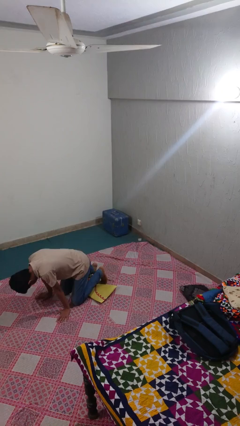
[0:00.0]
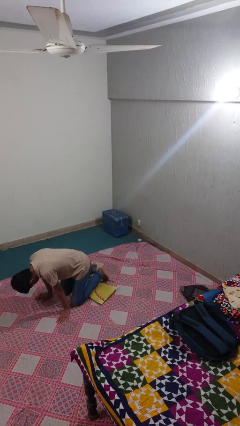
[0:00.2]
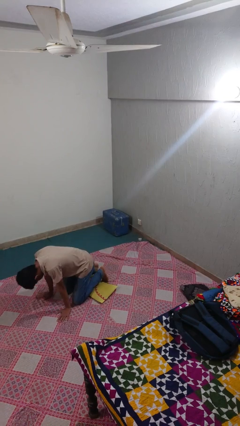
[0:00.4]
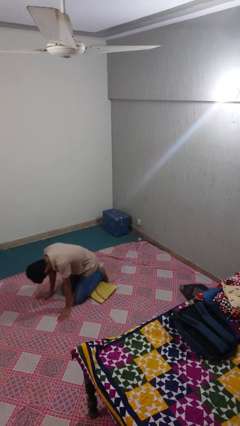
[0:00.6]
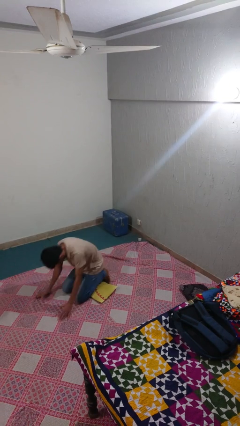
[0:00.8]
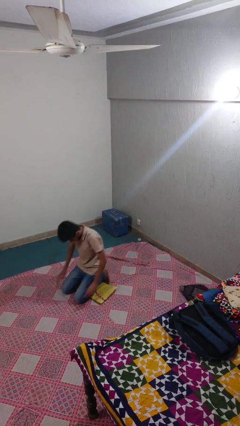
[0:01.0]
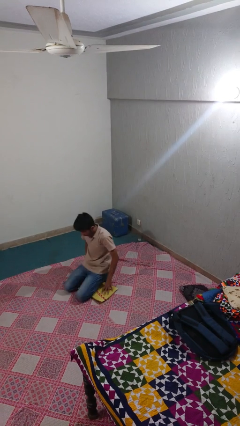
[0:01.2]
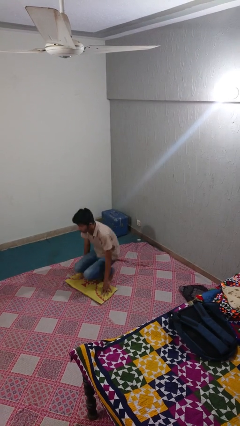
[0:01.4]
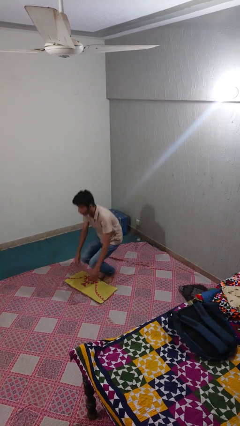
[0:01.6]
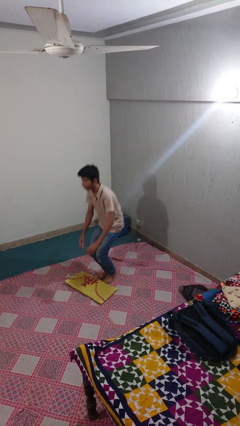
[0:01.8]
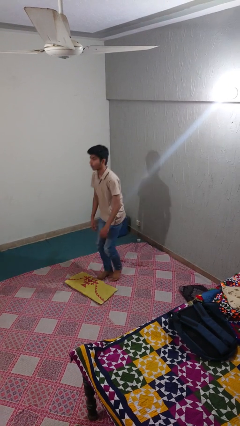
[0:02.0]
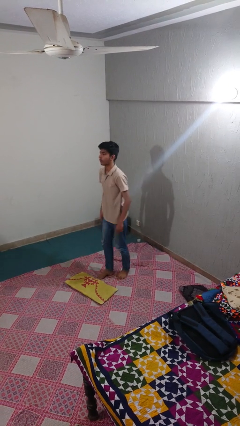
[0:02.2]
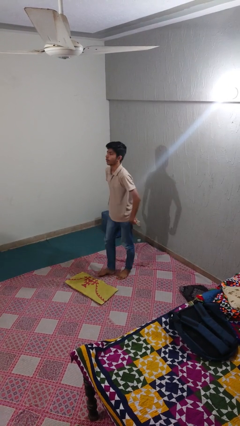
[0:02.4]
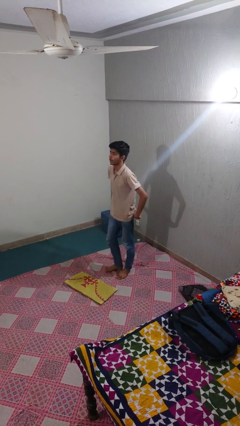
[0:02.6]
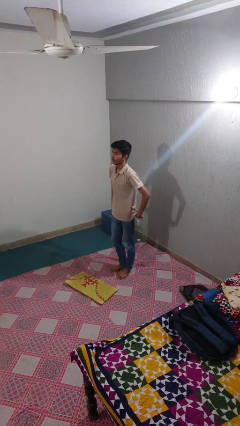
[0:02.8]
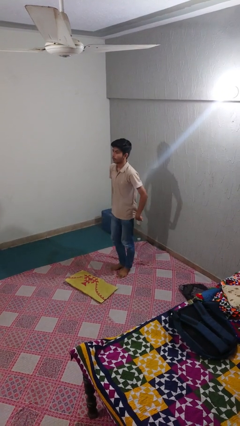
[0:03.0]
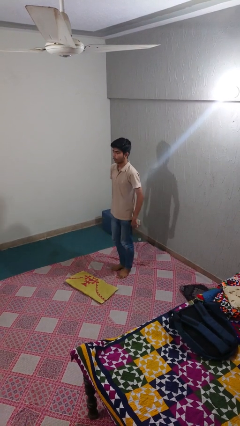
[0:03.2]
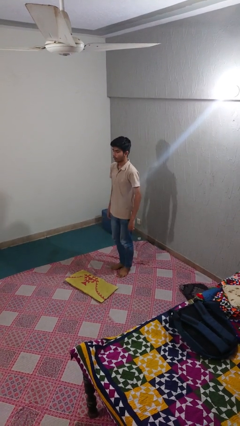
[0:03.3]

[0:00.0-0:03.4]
person trips on object on floor

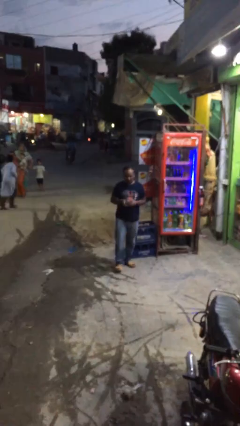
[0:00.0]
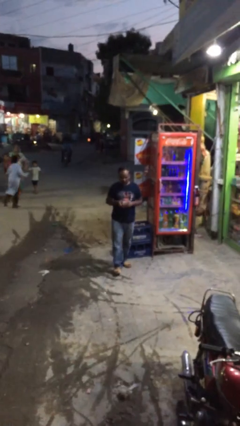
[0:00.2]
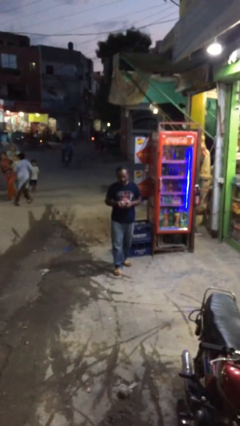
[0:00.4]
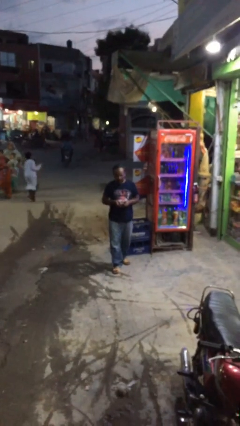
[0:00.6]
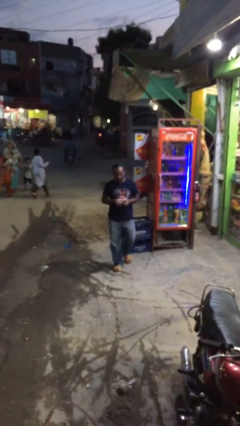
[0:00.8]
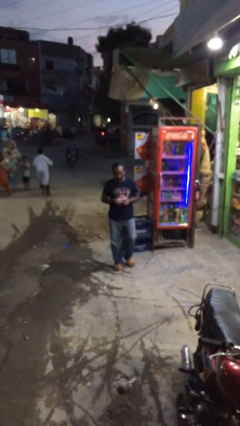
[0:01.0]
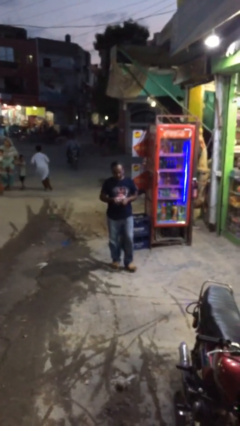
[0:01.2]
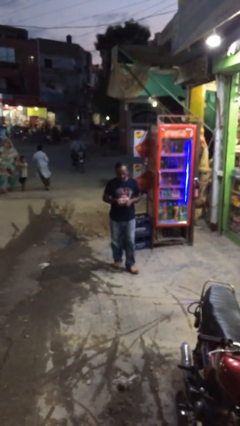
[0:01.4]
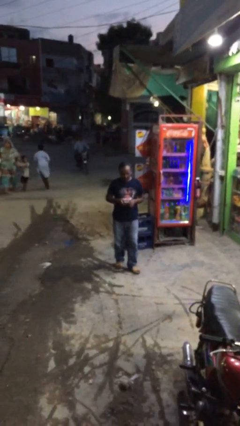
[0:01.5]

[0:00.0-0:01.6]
person texts on phone

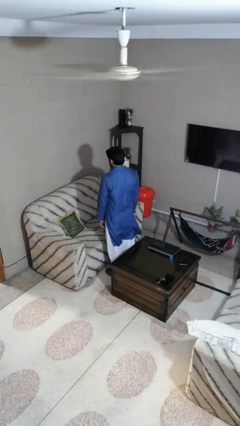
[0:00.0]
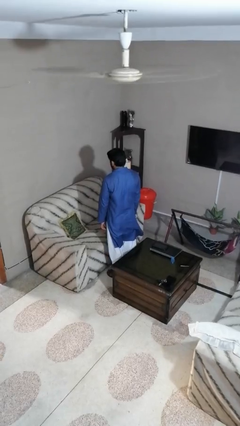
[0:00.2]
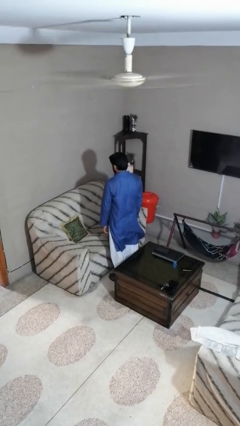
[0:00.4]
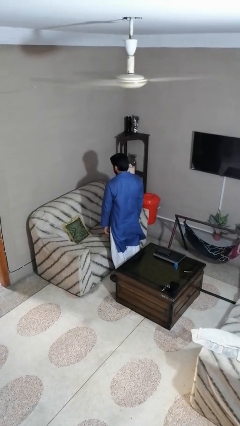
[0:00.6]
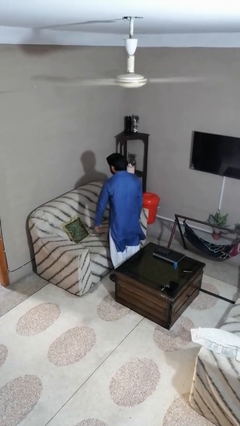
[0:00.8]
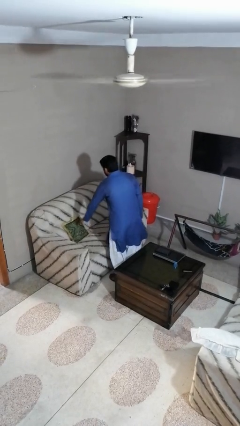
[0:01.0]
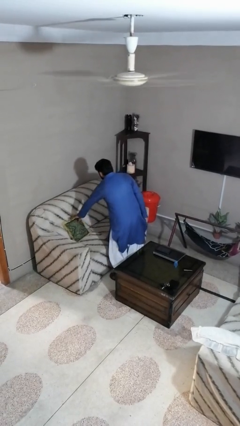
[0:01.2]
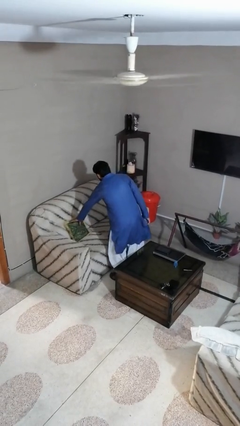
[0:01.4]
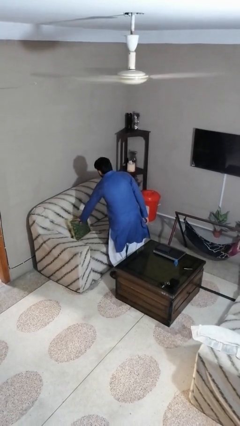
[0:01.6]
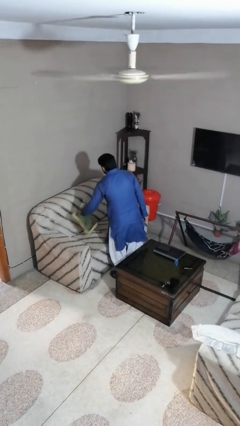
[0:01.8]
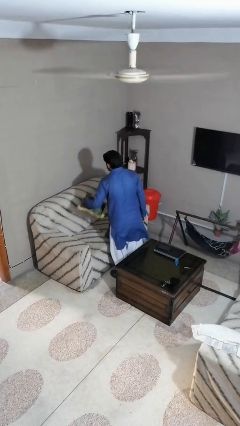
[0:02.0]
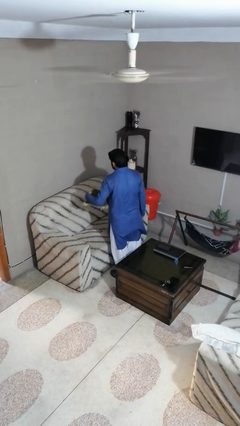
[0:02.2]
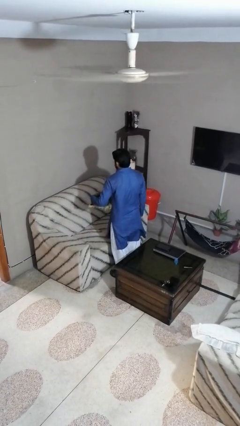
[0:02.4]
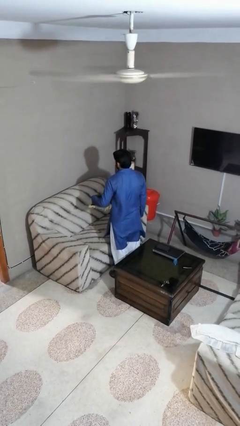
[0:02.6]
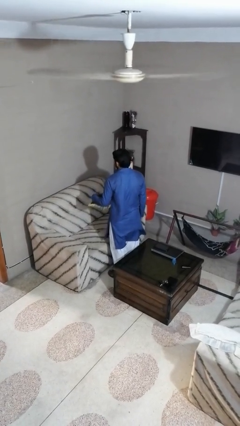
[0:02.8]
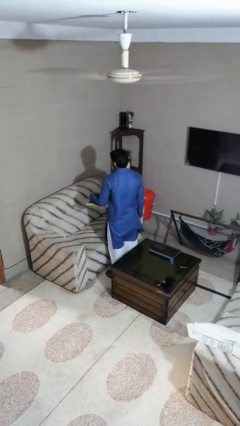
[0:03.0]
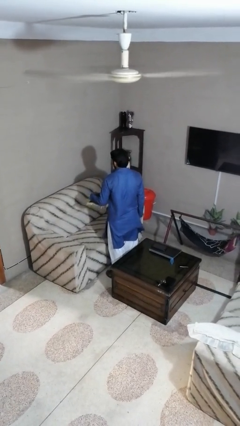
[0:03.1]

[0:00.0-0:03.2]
person picks up object from couch

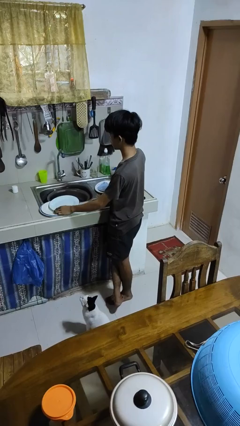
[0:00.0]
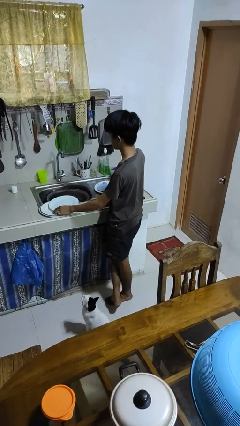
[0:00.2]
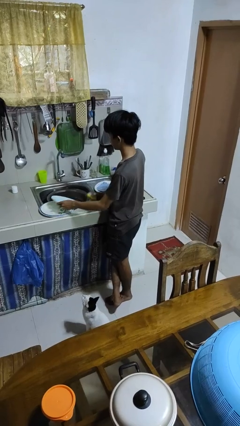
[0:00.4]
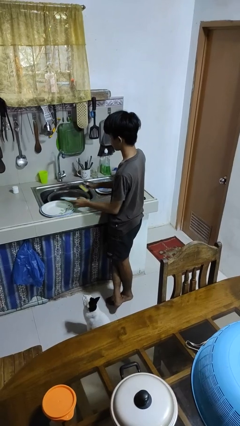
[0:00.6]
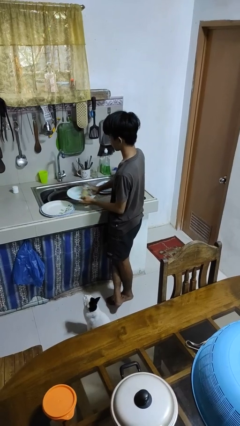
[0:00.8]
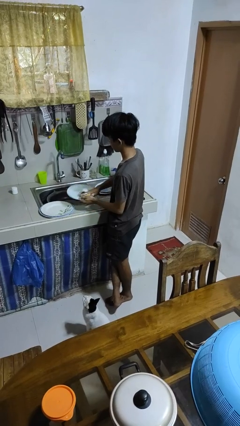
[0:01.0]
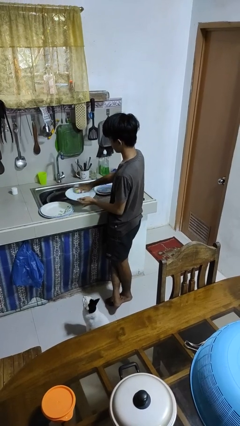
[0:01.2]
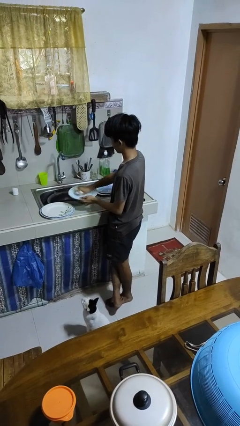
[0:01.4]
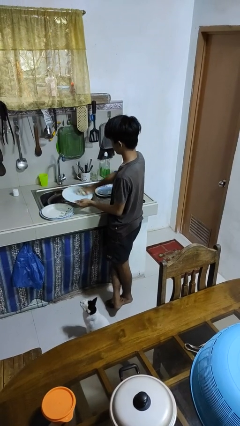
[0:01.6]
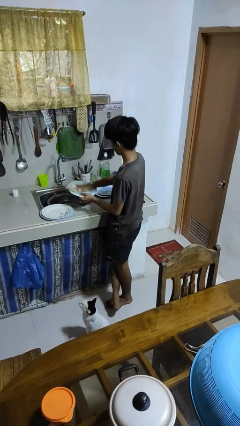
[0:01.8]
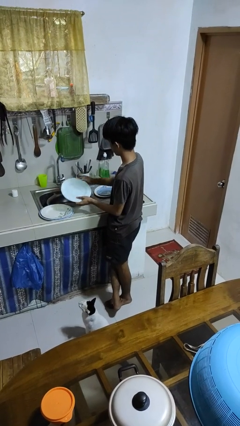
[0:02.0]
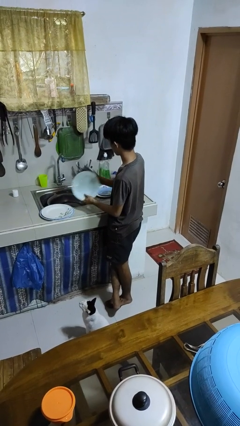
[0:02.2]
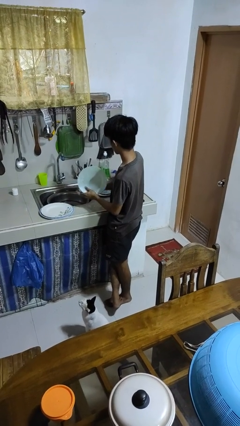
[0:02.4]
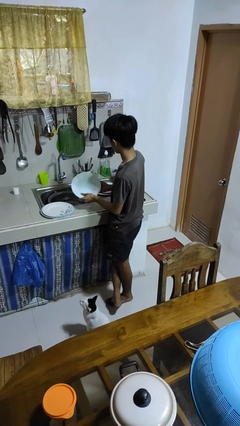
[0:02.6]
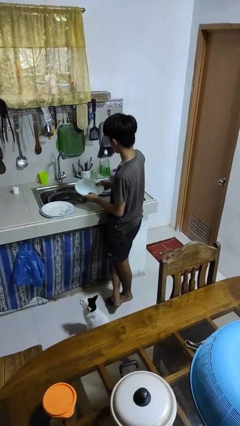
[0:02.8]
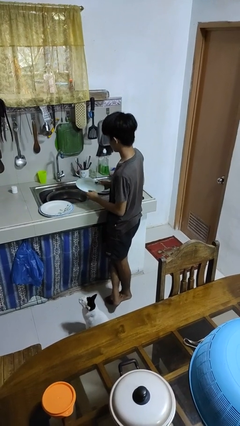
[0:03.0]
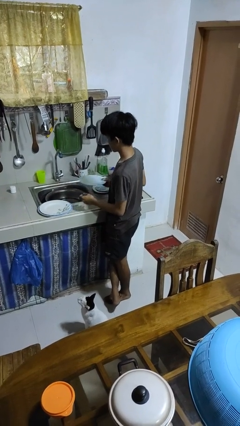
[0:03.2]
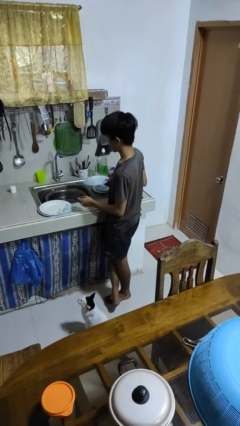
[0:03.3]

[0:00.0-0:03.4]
person washes hands

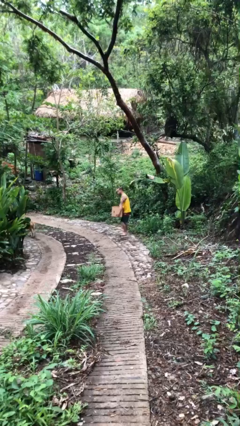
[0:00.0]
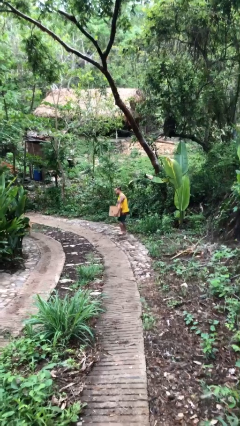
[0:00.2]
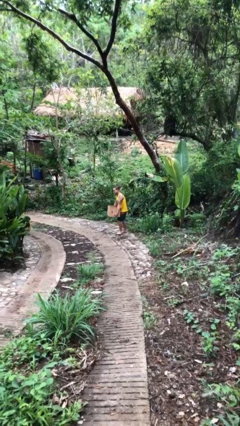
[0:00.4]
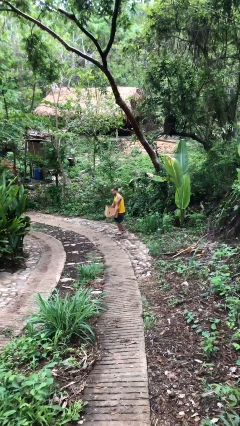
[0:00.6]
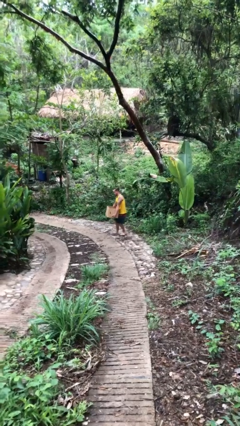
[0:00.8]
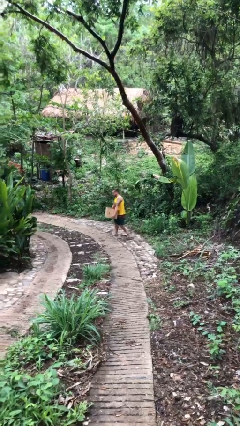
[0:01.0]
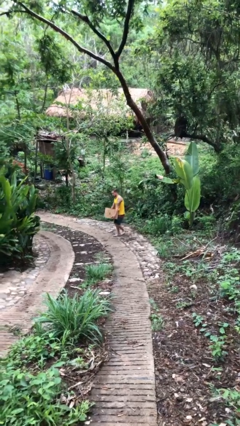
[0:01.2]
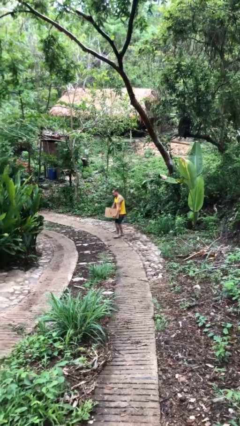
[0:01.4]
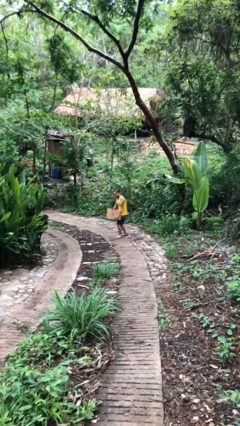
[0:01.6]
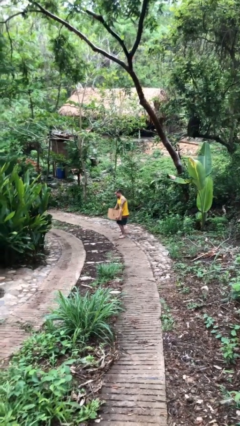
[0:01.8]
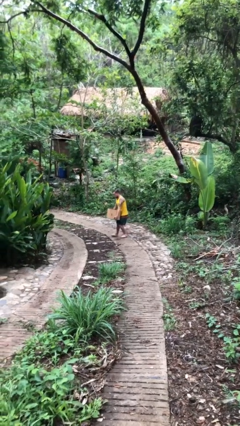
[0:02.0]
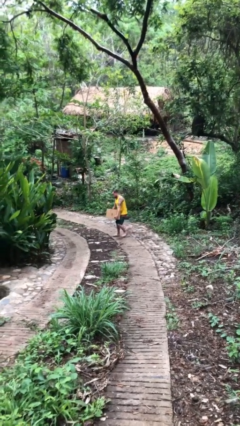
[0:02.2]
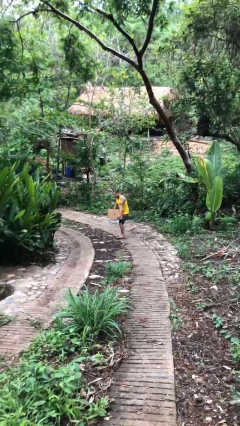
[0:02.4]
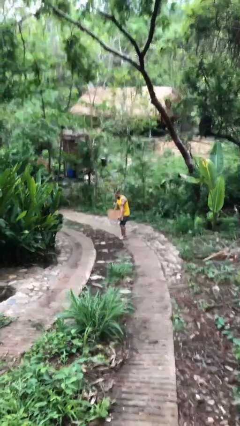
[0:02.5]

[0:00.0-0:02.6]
person carries heavy object

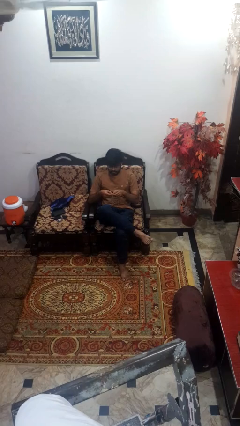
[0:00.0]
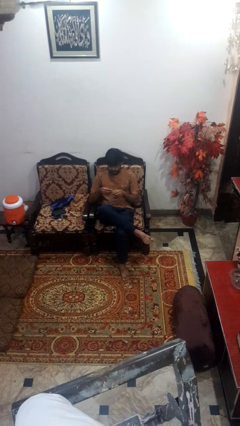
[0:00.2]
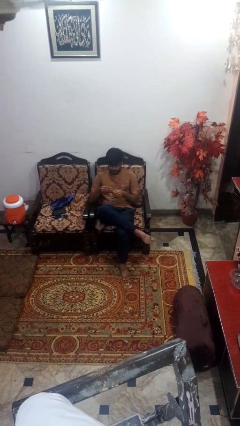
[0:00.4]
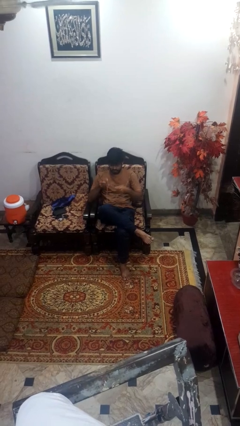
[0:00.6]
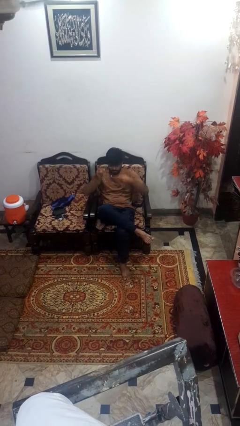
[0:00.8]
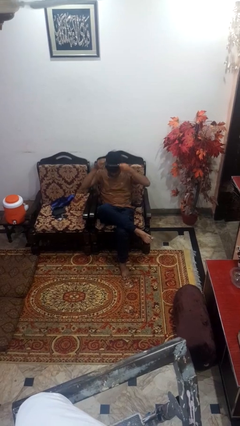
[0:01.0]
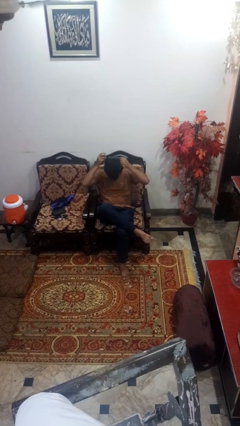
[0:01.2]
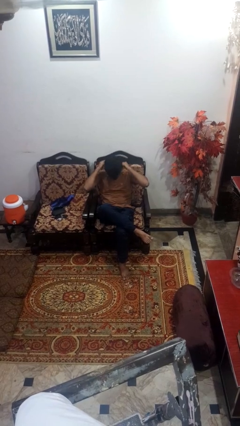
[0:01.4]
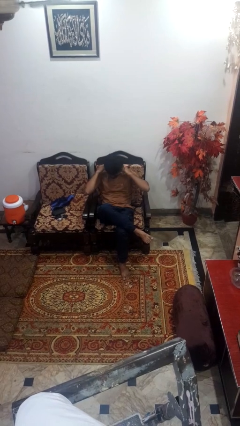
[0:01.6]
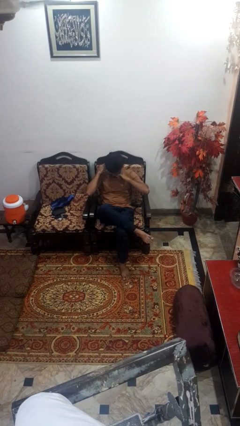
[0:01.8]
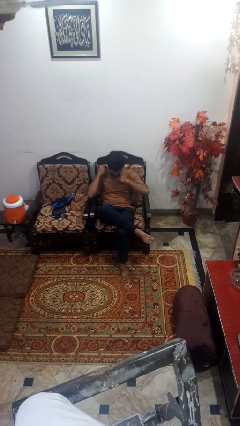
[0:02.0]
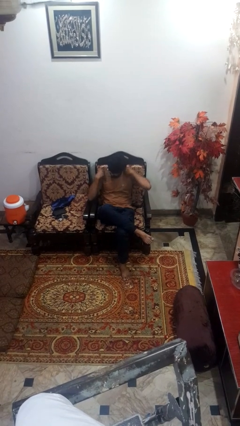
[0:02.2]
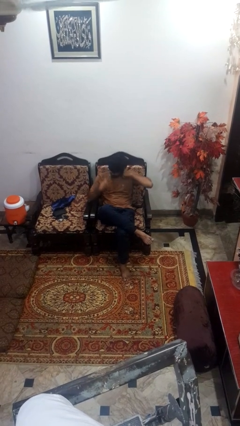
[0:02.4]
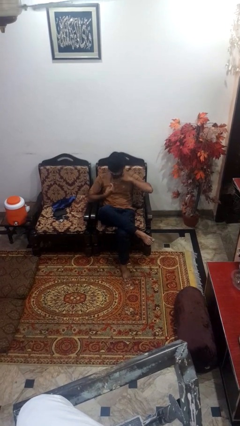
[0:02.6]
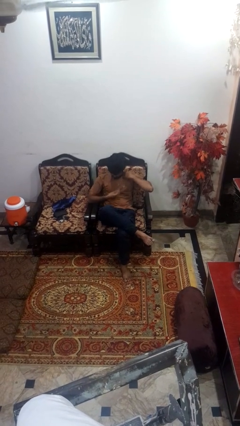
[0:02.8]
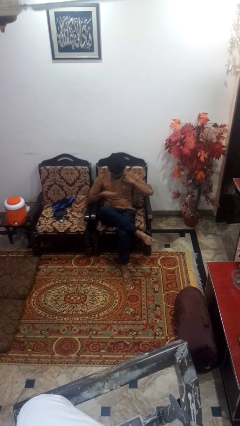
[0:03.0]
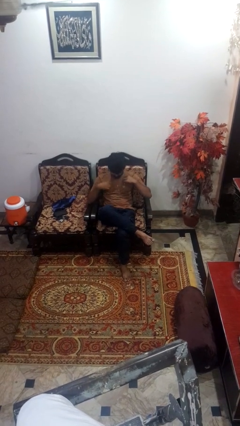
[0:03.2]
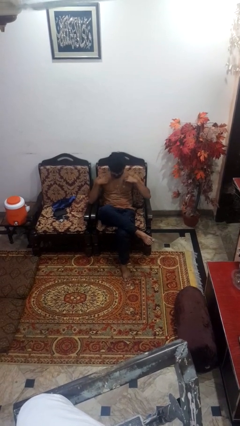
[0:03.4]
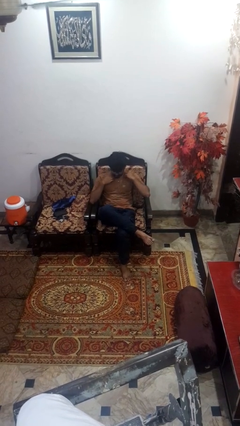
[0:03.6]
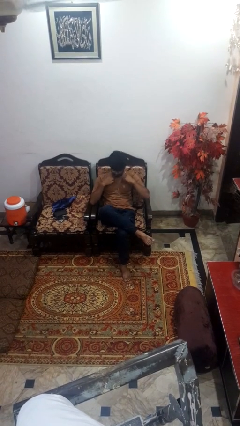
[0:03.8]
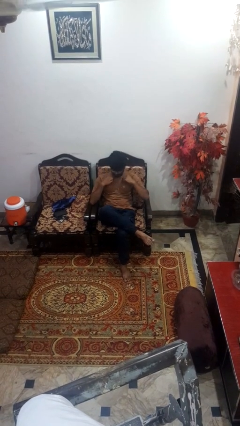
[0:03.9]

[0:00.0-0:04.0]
person puts on necklace
